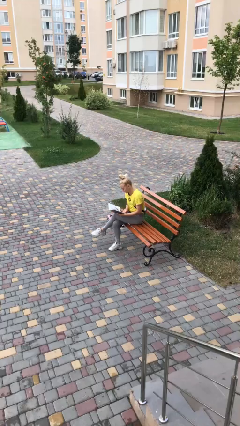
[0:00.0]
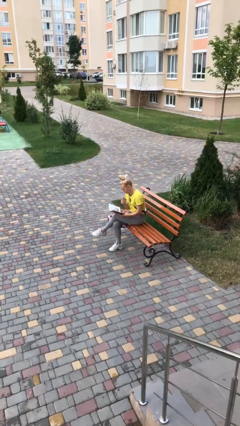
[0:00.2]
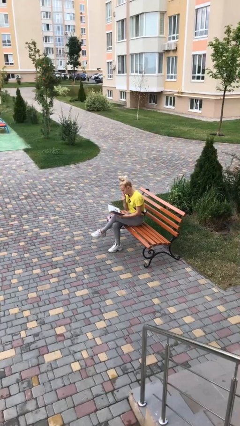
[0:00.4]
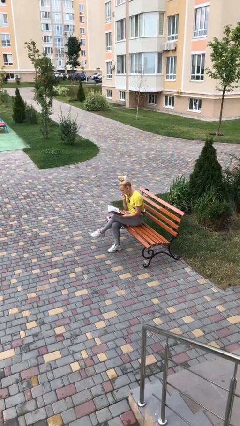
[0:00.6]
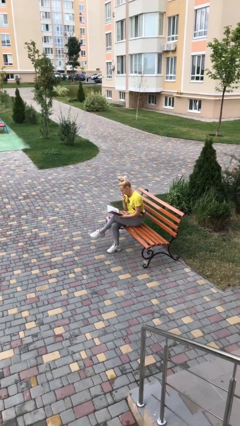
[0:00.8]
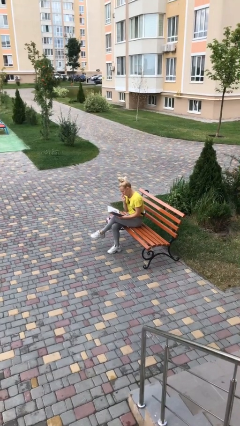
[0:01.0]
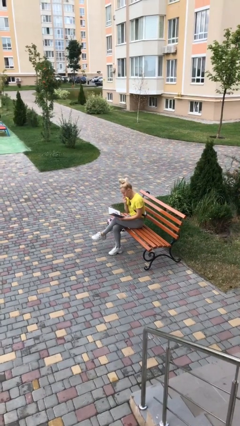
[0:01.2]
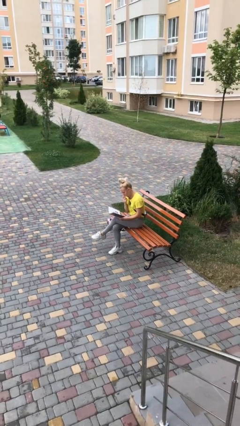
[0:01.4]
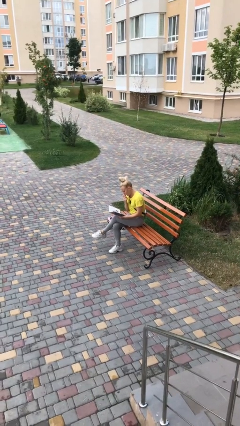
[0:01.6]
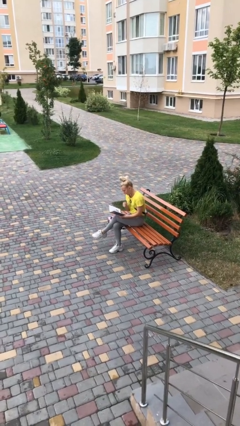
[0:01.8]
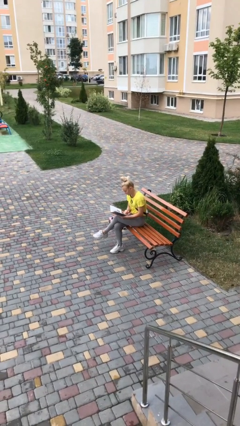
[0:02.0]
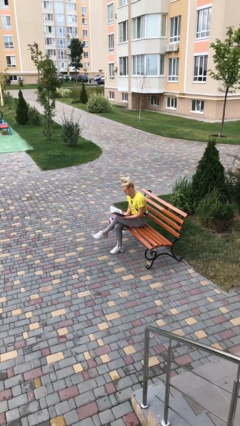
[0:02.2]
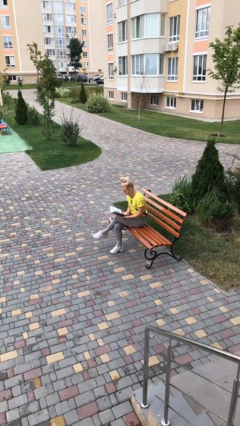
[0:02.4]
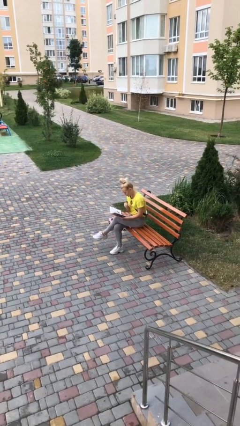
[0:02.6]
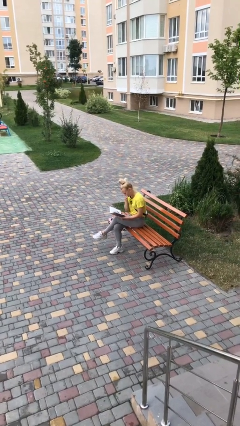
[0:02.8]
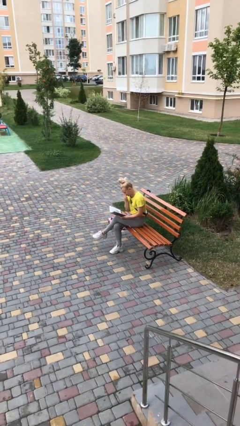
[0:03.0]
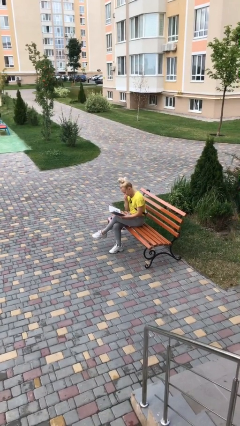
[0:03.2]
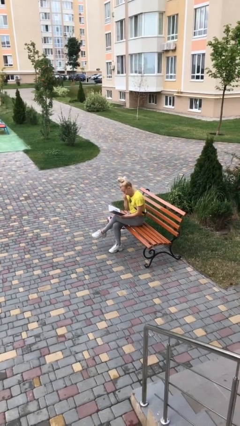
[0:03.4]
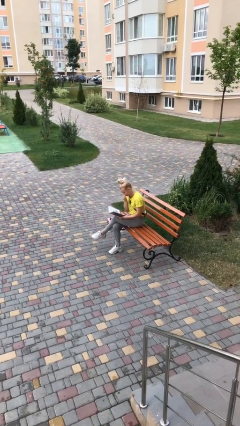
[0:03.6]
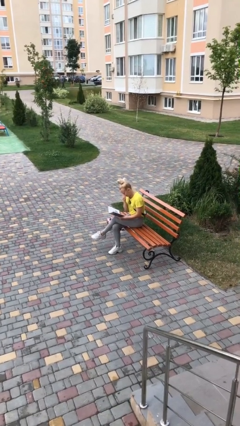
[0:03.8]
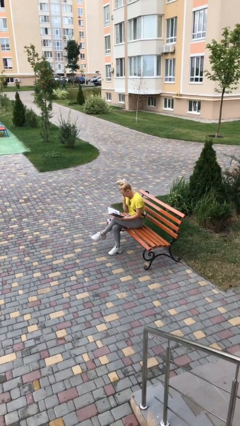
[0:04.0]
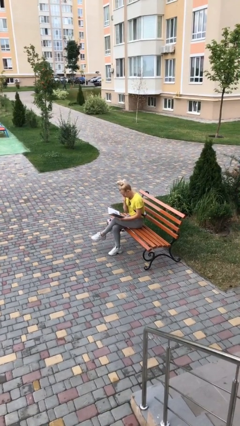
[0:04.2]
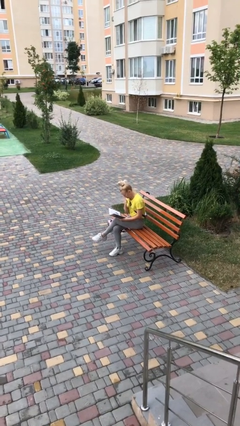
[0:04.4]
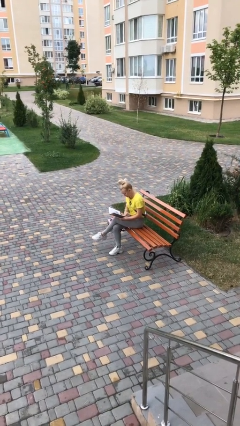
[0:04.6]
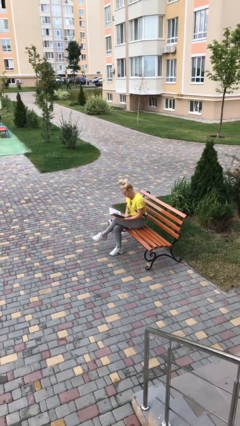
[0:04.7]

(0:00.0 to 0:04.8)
person reads document

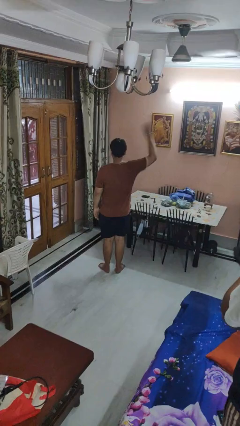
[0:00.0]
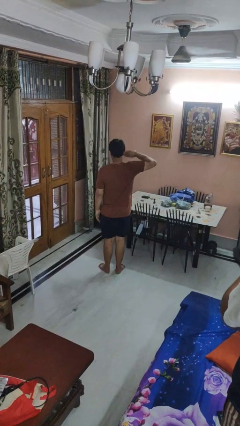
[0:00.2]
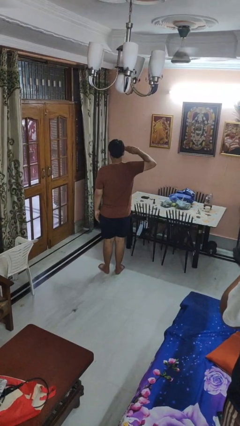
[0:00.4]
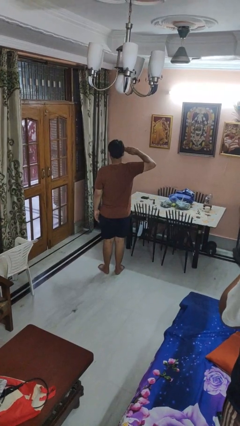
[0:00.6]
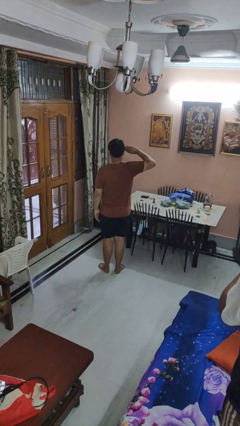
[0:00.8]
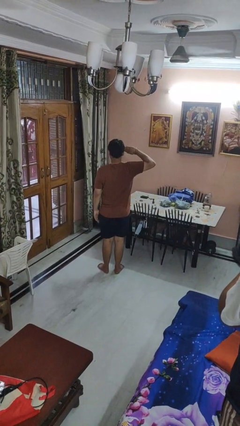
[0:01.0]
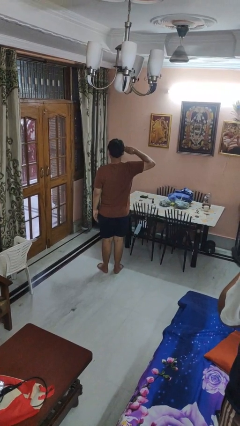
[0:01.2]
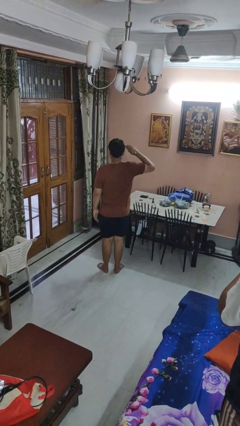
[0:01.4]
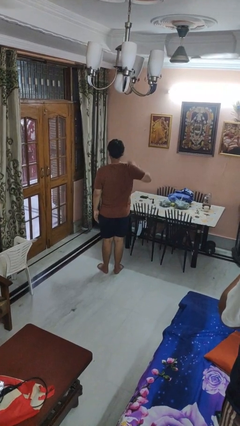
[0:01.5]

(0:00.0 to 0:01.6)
person salutes

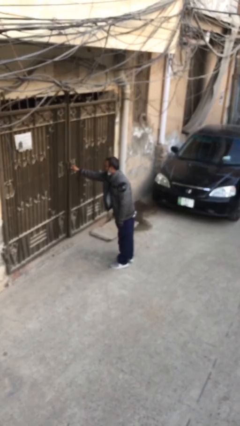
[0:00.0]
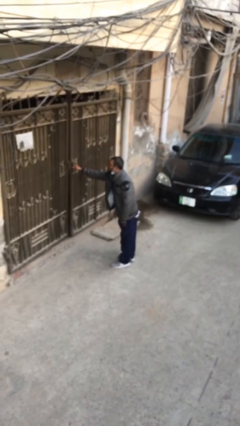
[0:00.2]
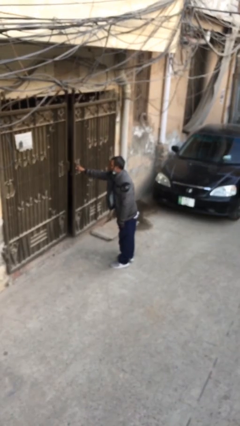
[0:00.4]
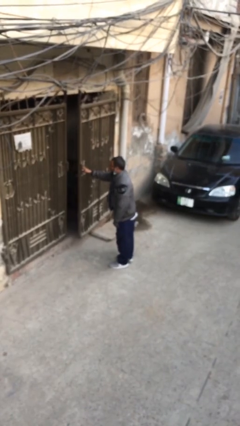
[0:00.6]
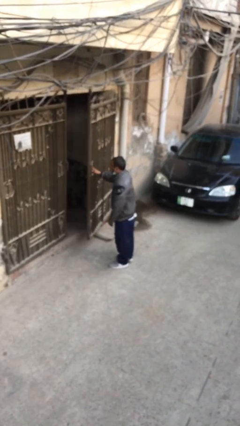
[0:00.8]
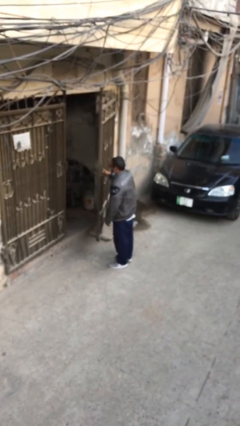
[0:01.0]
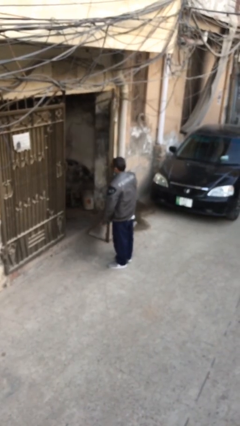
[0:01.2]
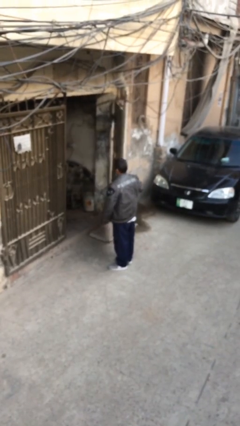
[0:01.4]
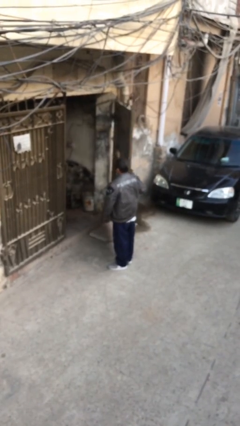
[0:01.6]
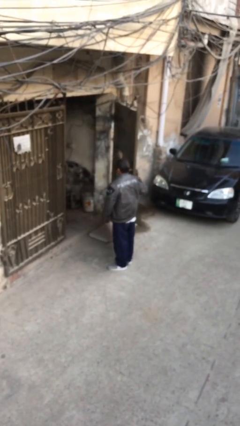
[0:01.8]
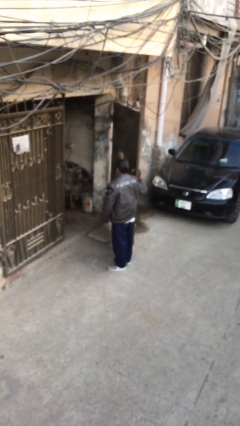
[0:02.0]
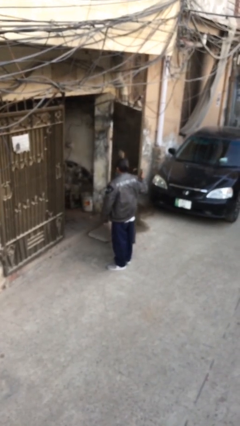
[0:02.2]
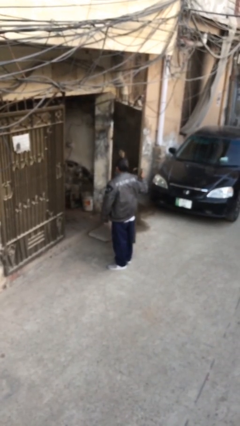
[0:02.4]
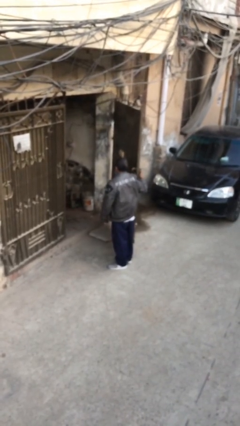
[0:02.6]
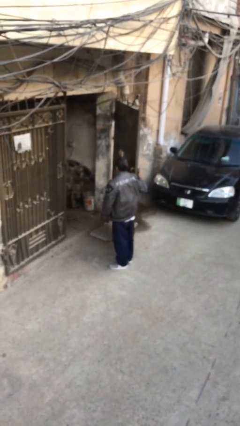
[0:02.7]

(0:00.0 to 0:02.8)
person opens facility door

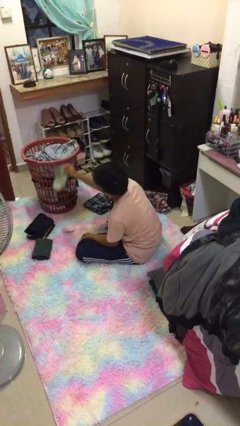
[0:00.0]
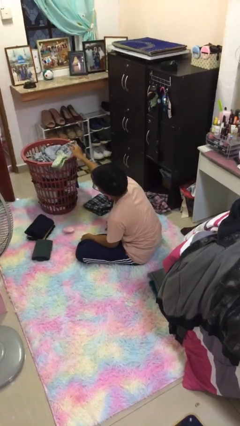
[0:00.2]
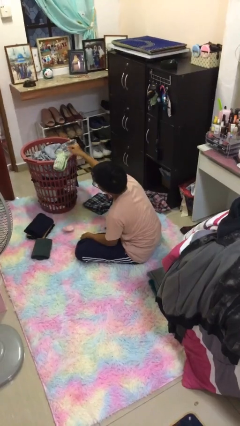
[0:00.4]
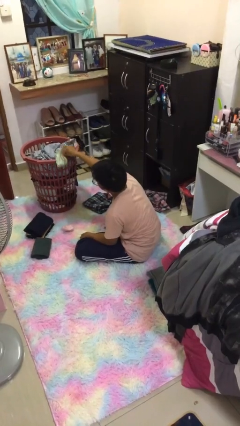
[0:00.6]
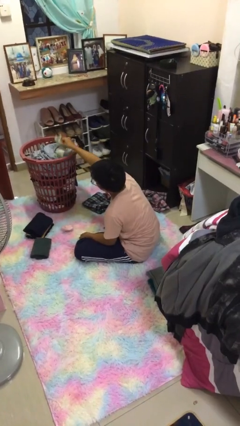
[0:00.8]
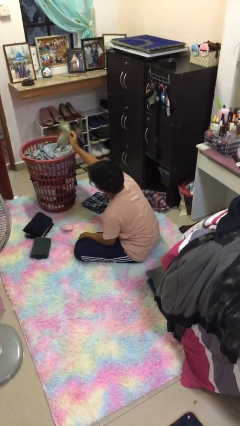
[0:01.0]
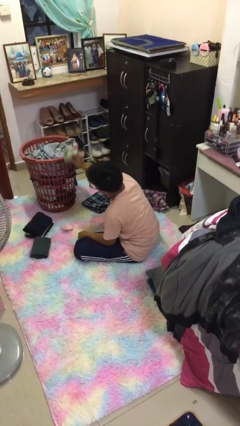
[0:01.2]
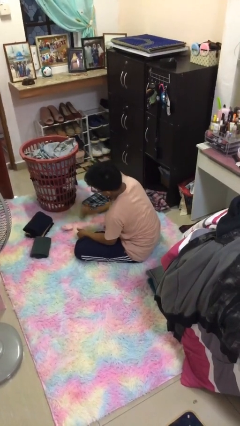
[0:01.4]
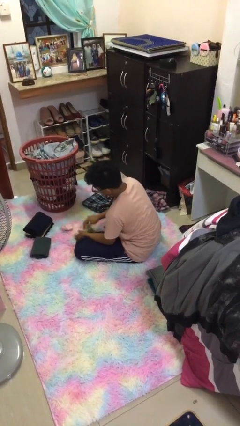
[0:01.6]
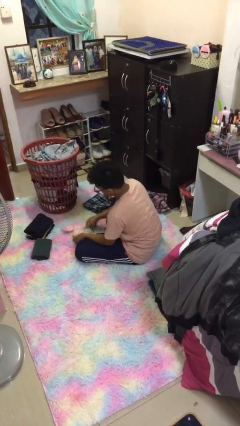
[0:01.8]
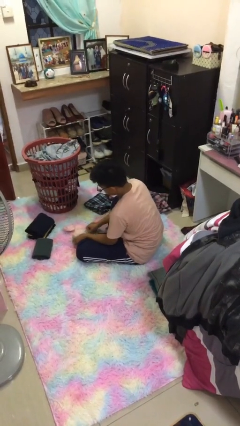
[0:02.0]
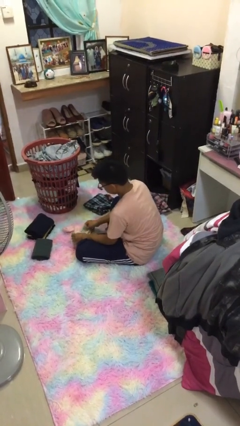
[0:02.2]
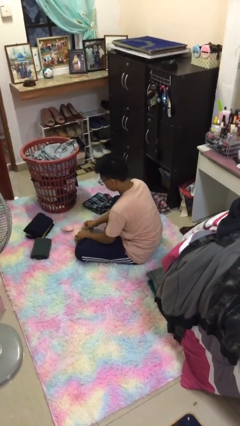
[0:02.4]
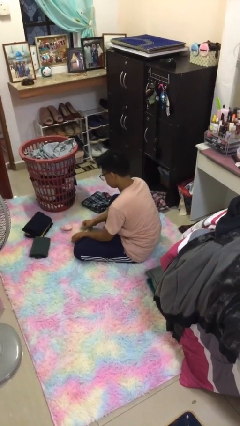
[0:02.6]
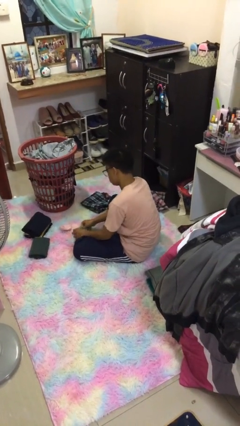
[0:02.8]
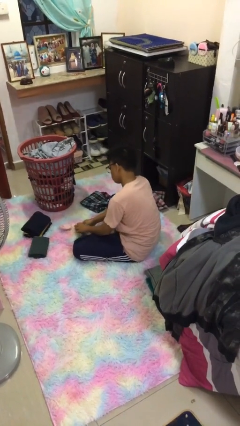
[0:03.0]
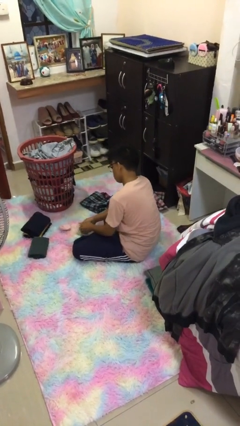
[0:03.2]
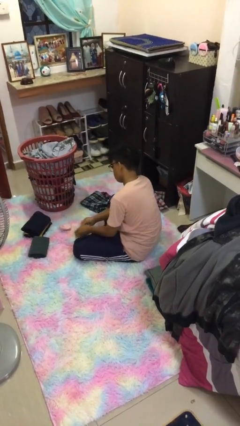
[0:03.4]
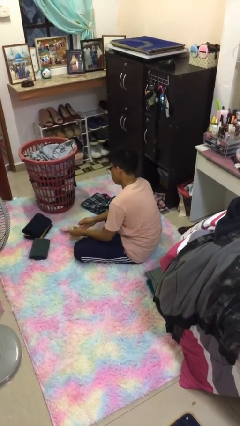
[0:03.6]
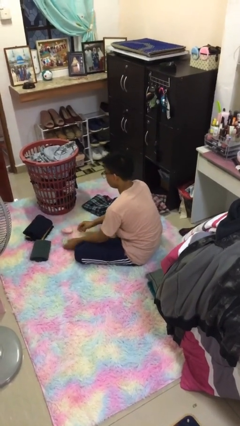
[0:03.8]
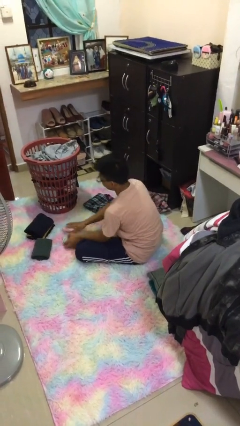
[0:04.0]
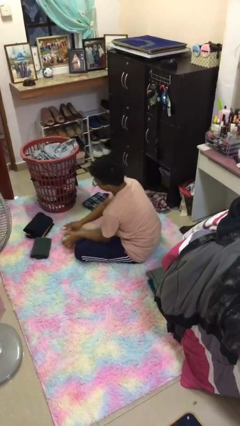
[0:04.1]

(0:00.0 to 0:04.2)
person folds socks

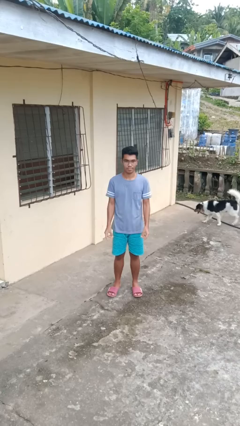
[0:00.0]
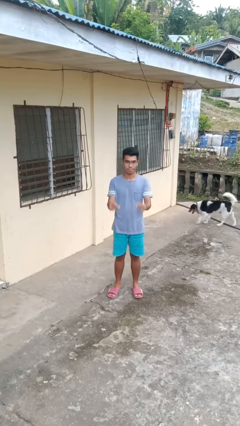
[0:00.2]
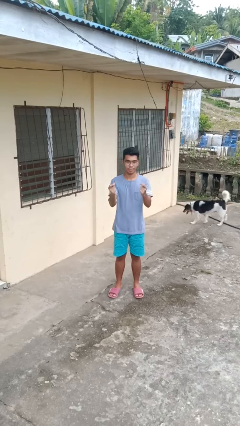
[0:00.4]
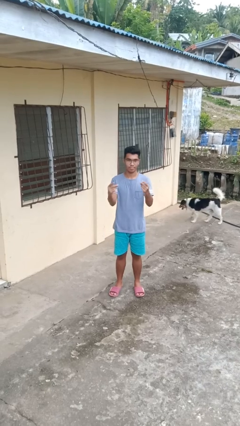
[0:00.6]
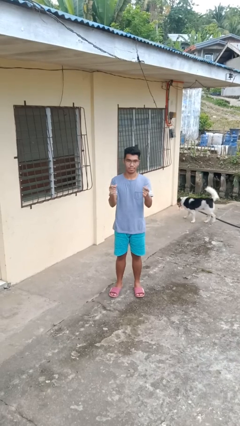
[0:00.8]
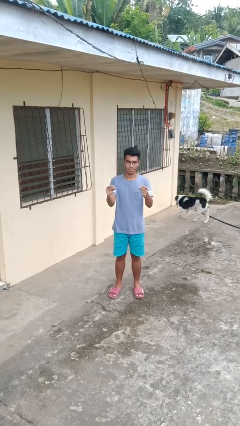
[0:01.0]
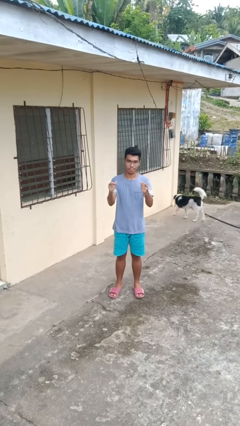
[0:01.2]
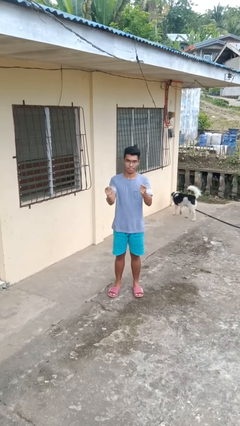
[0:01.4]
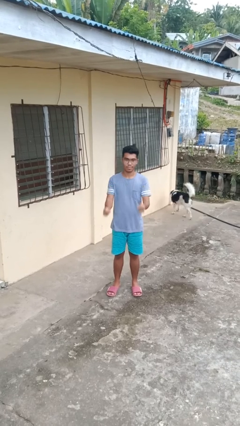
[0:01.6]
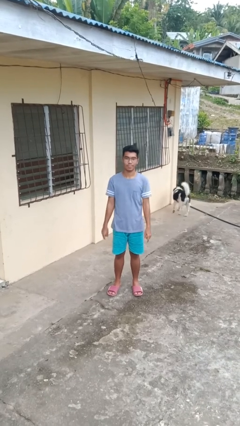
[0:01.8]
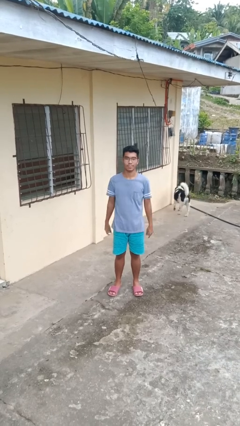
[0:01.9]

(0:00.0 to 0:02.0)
person snaps fingers

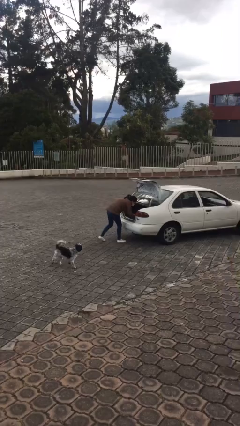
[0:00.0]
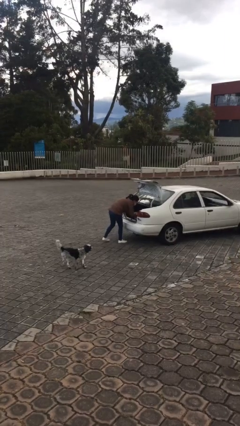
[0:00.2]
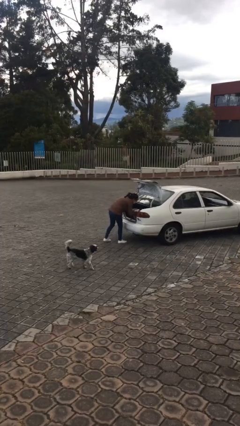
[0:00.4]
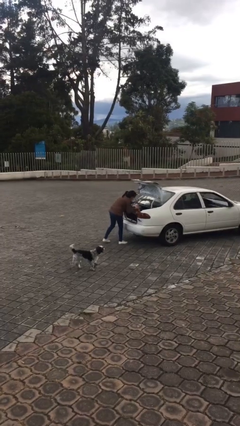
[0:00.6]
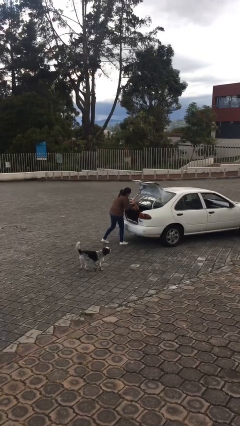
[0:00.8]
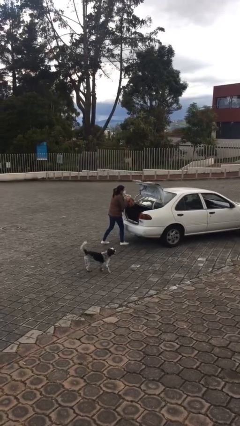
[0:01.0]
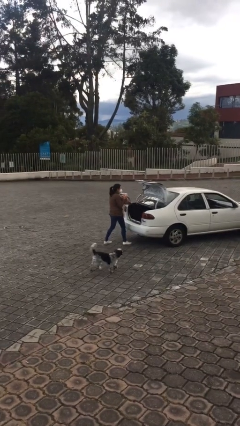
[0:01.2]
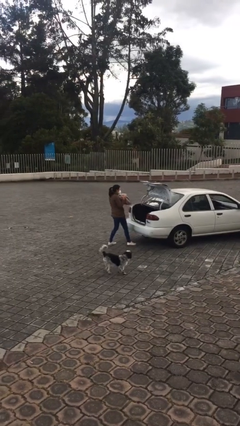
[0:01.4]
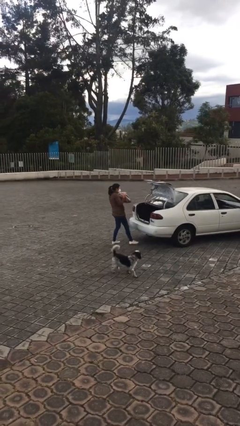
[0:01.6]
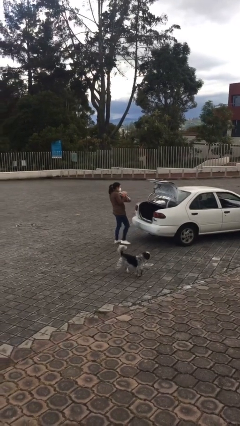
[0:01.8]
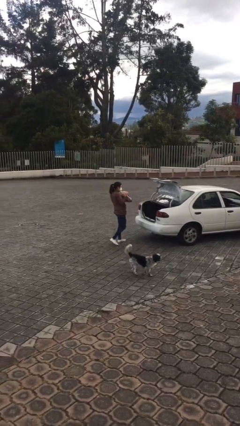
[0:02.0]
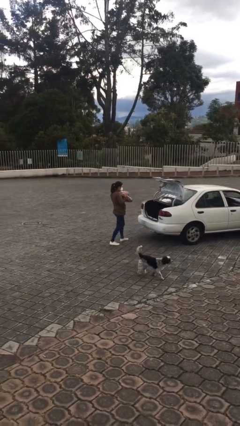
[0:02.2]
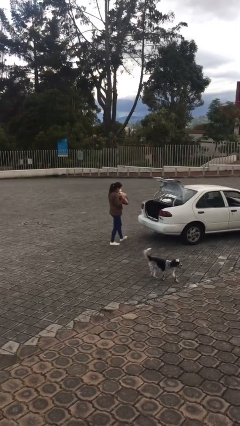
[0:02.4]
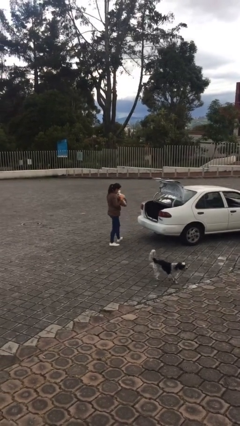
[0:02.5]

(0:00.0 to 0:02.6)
person unloads car
